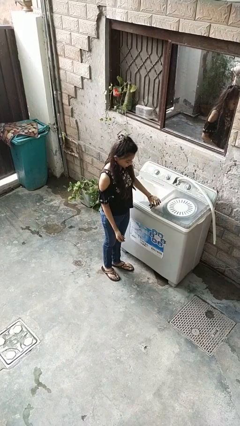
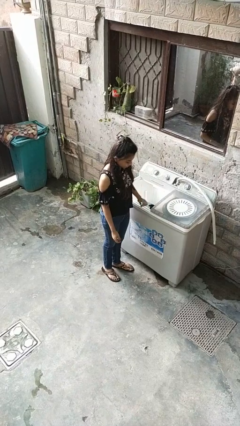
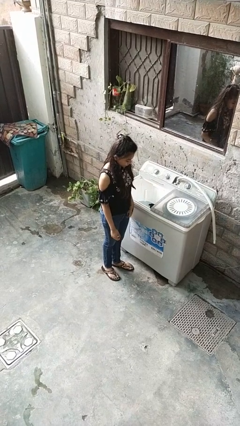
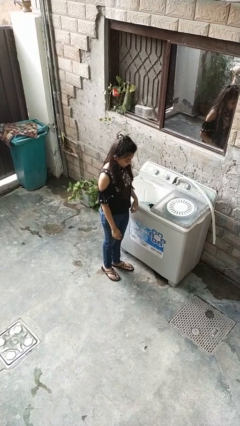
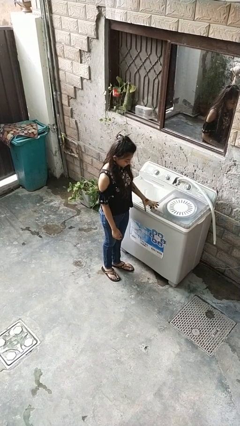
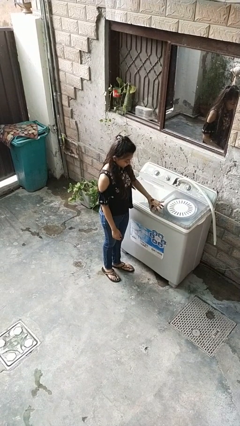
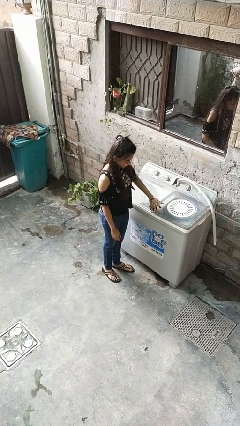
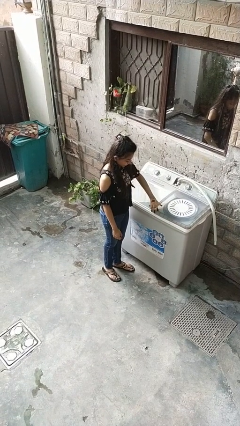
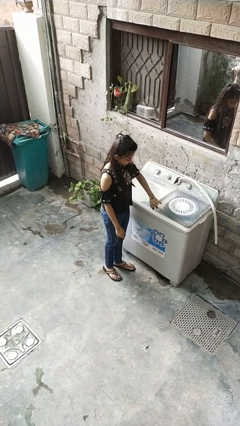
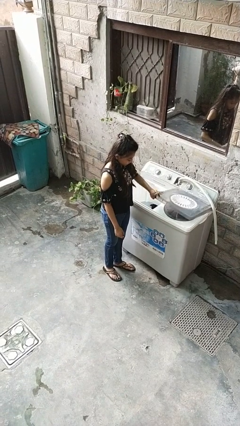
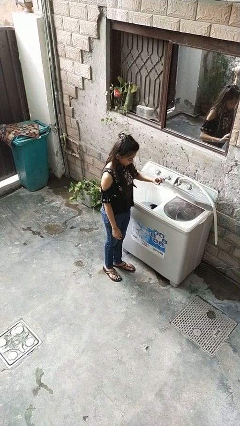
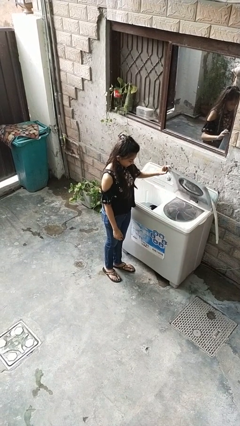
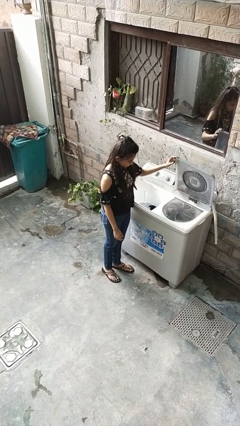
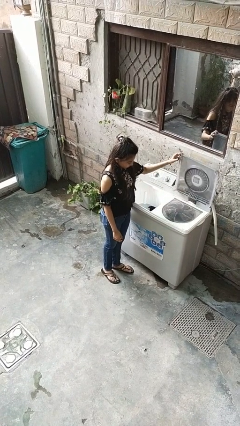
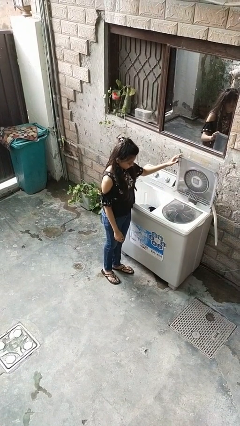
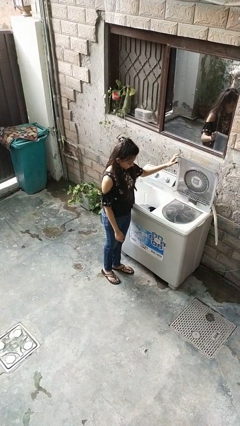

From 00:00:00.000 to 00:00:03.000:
person opens clothes washer

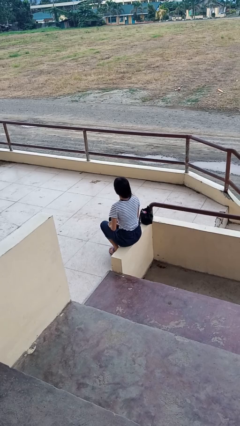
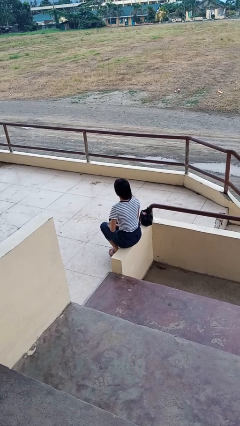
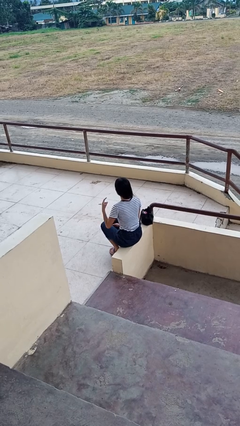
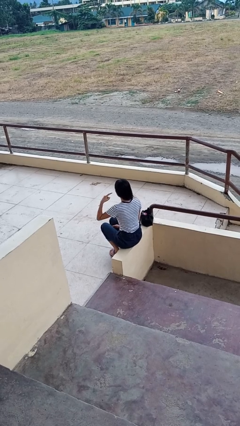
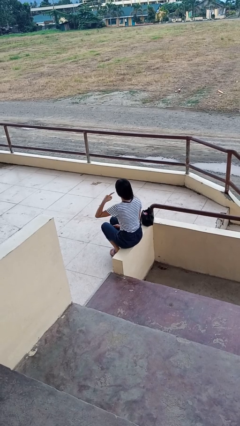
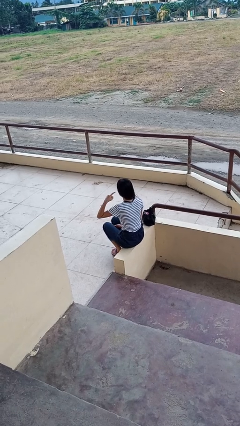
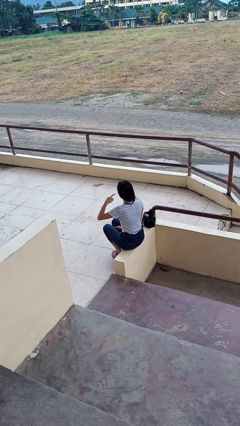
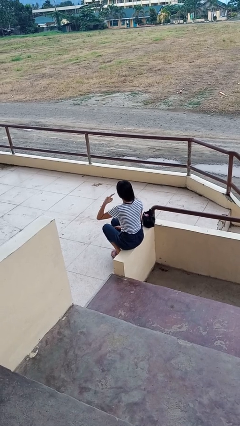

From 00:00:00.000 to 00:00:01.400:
person gestures listen closely

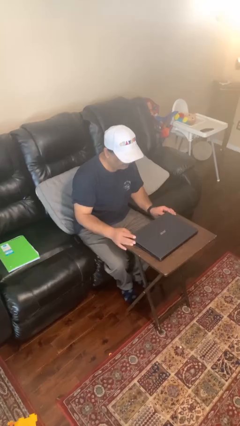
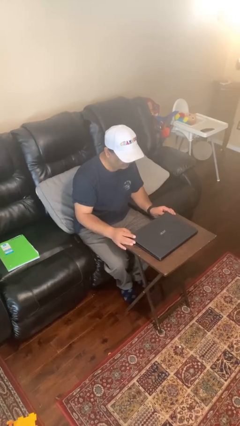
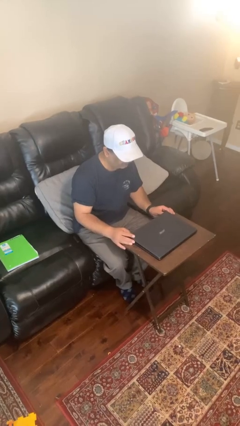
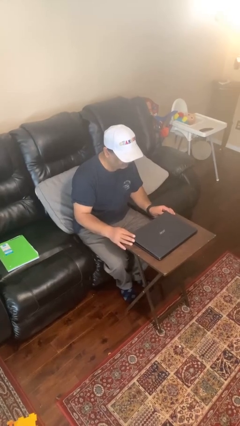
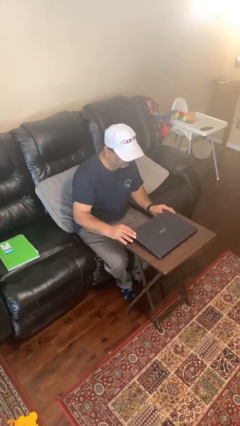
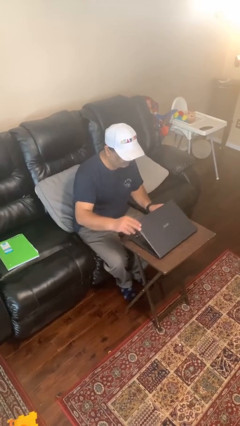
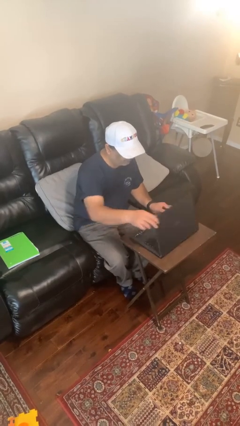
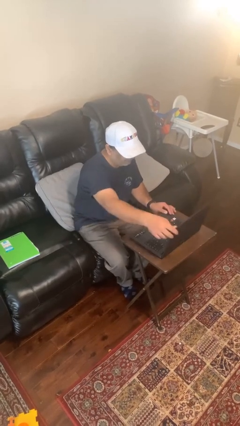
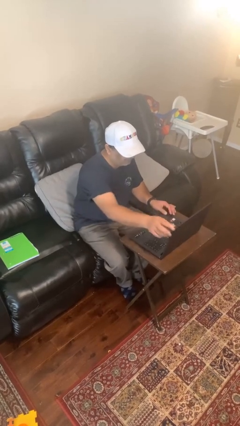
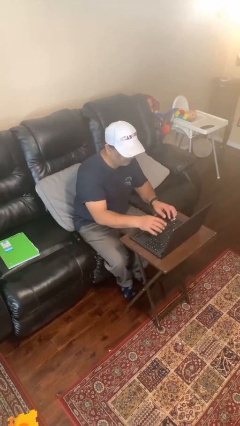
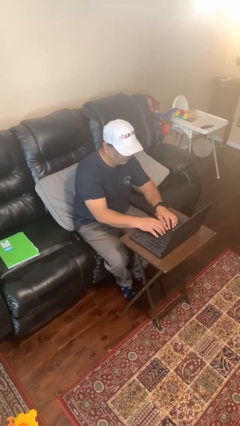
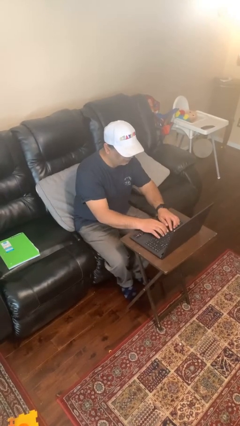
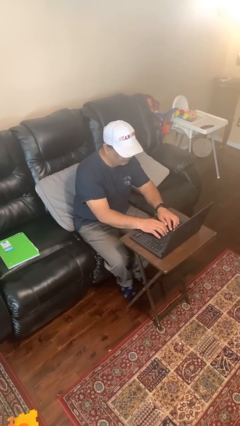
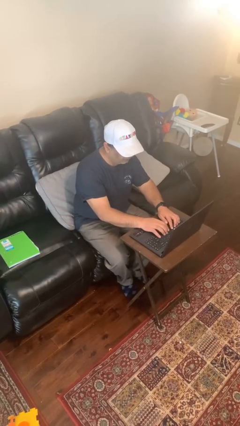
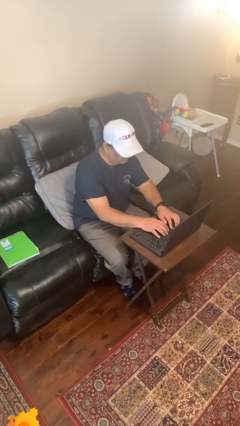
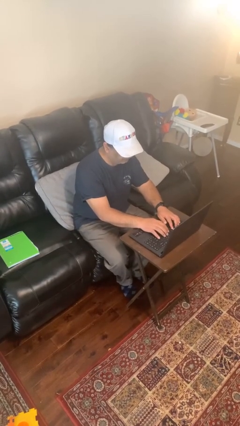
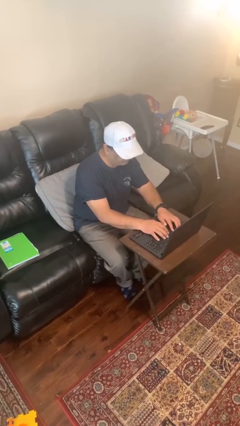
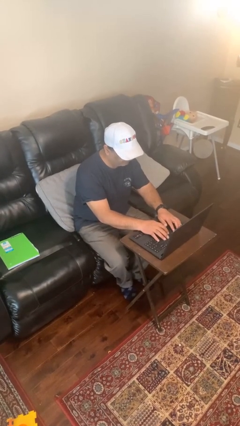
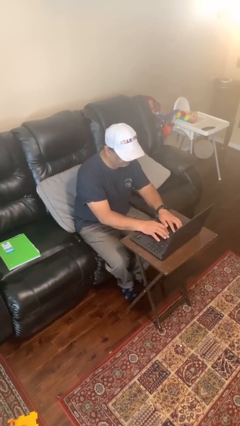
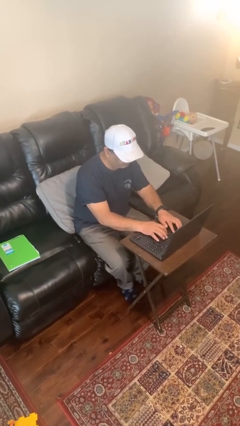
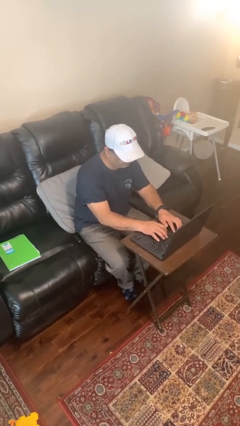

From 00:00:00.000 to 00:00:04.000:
person interacts with laptop

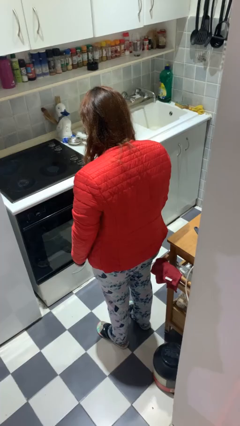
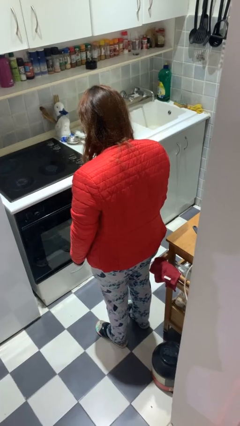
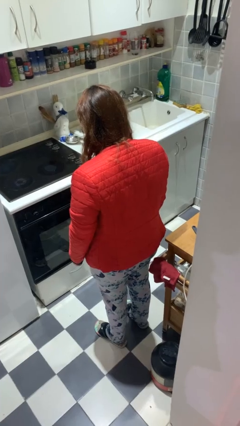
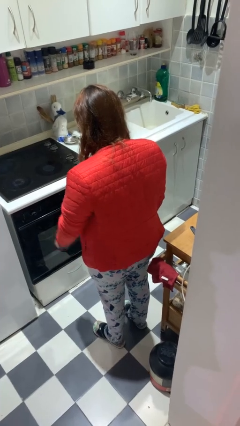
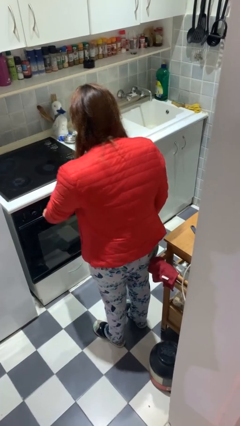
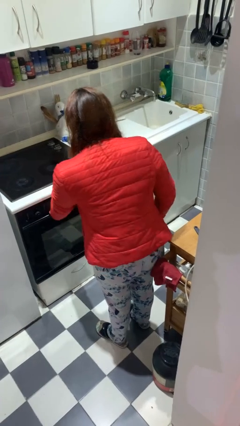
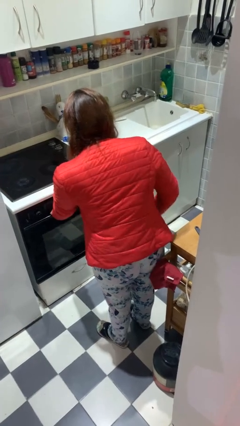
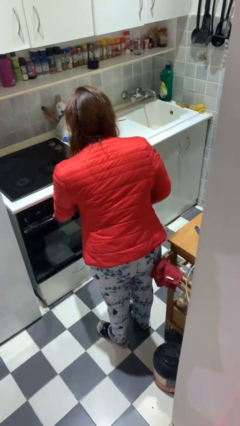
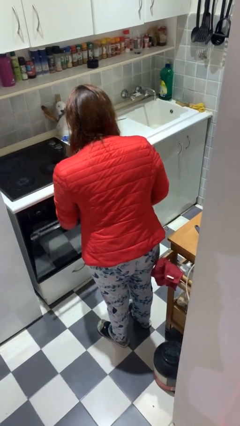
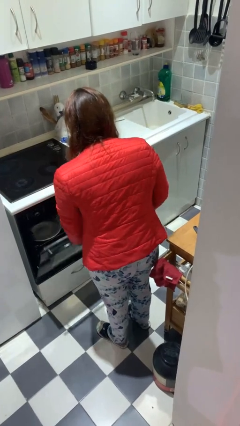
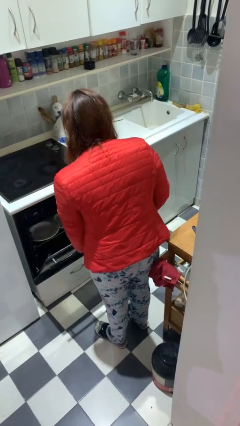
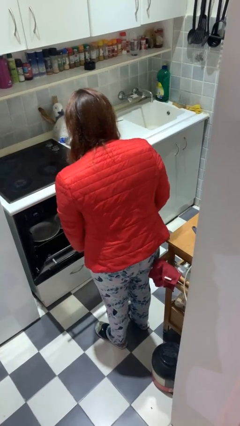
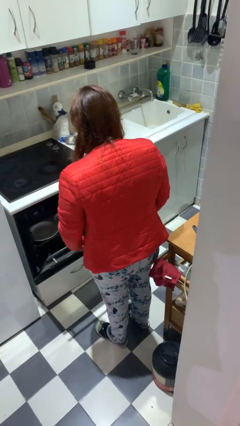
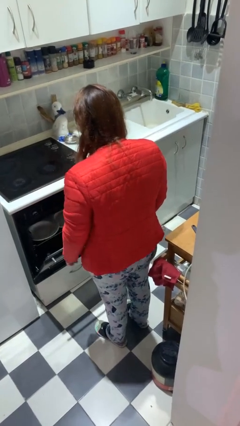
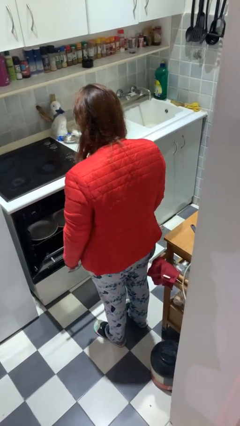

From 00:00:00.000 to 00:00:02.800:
person opens dishwasher

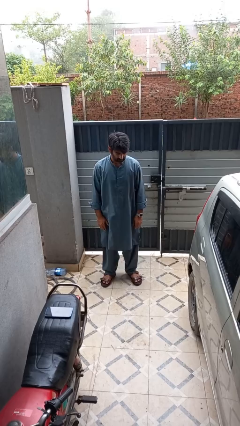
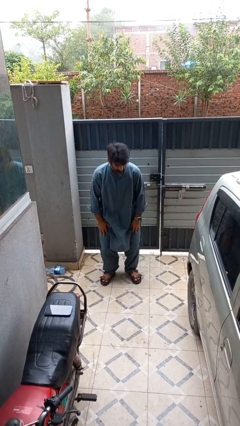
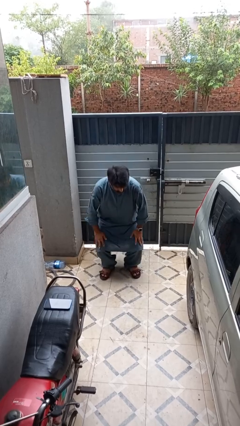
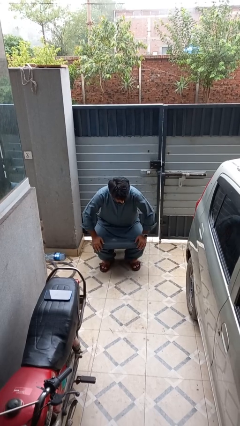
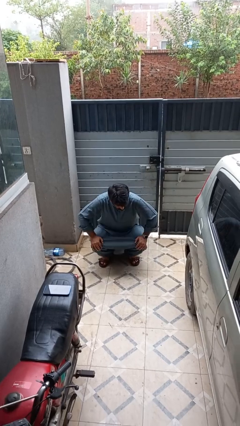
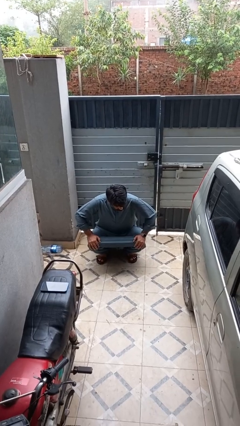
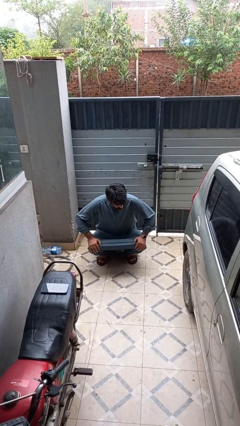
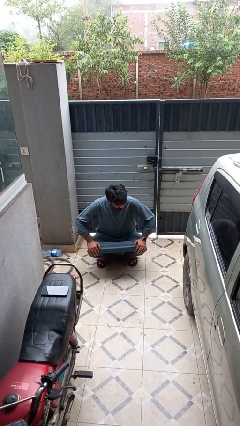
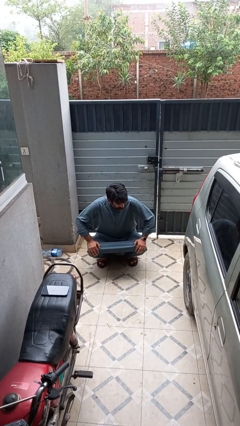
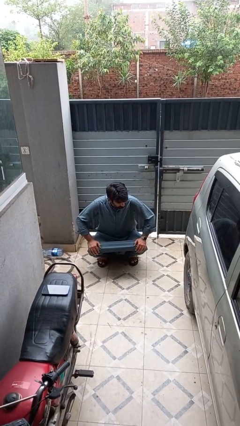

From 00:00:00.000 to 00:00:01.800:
person squats

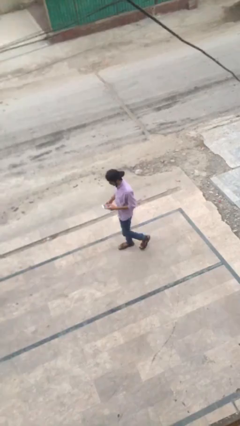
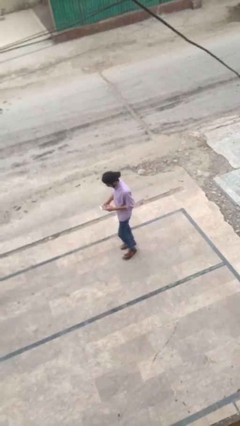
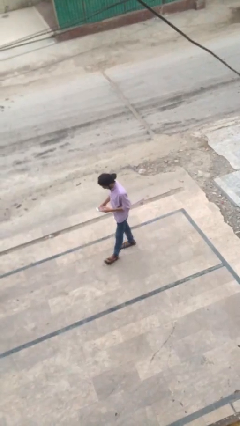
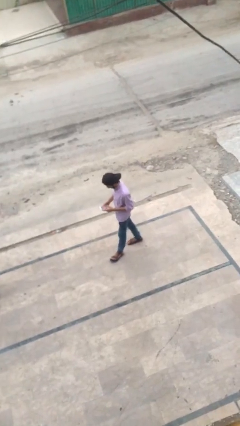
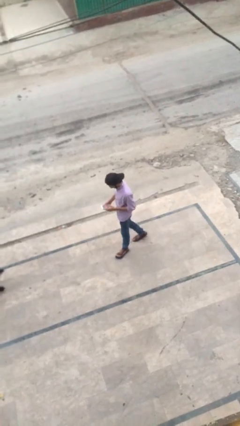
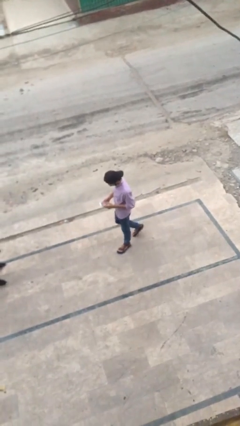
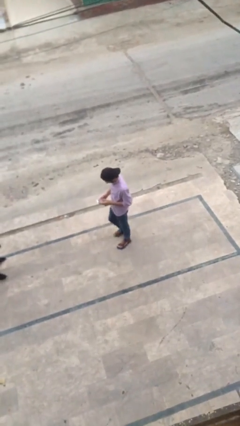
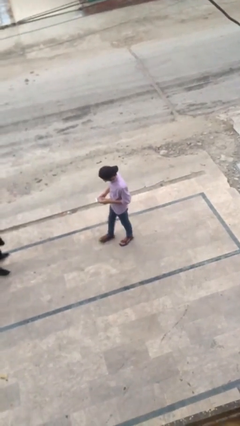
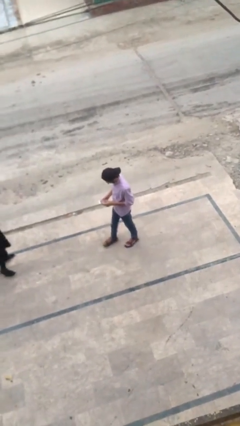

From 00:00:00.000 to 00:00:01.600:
person texts on phone

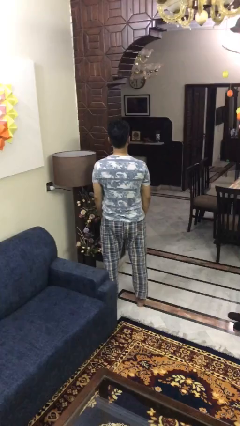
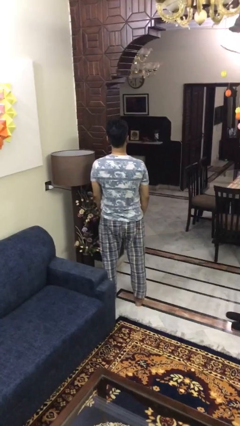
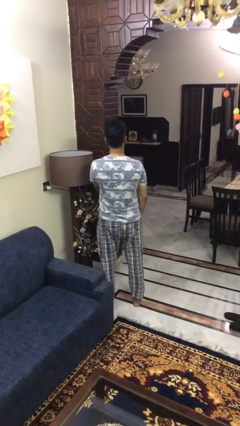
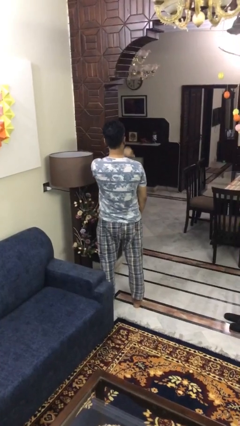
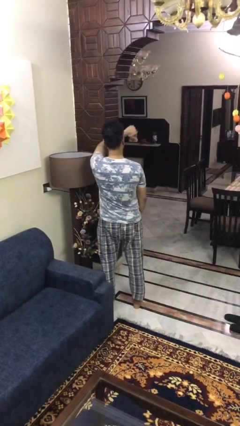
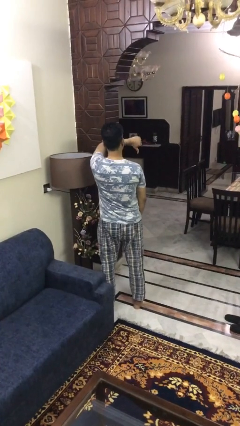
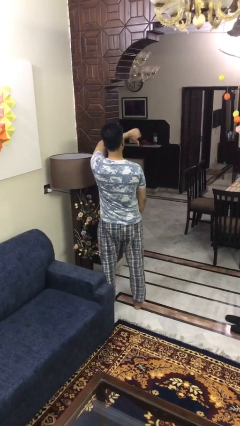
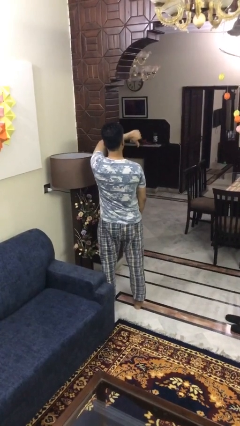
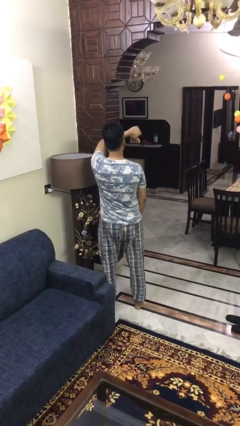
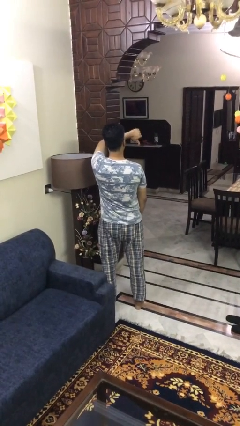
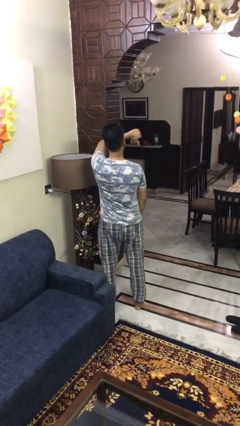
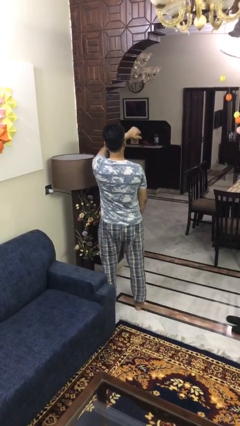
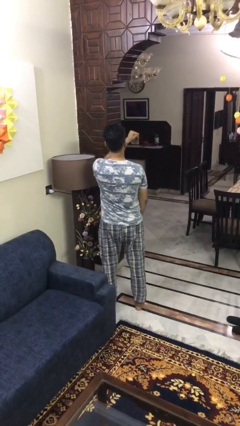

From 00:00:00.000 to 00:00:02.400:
person gestures thumbs down
